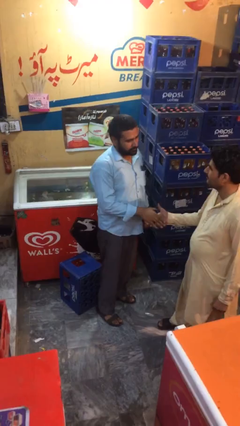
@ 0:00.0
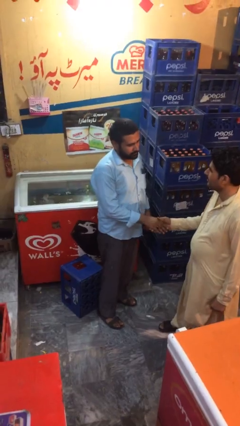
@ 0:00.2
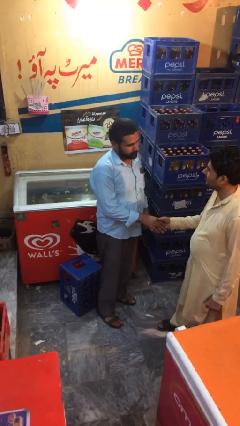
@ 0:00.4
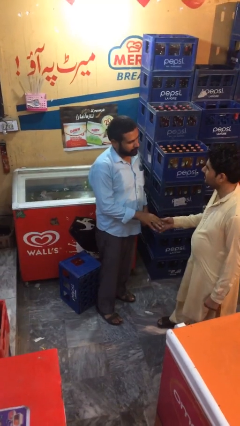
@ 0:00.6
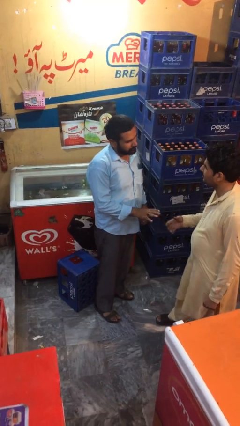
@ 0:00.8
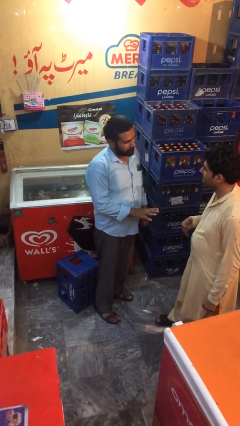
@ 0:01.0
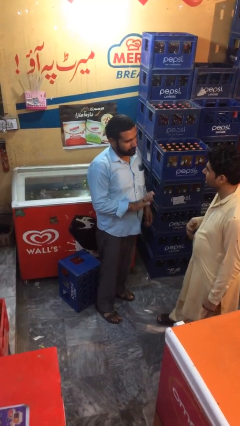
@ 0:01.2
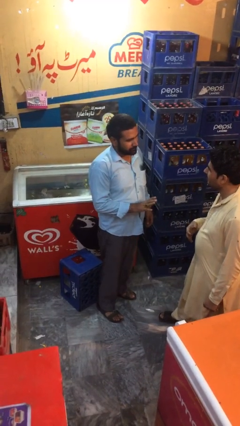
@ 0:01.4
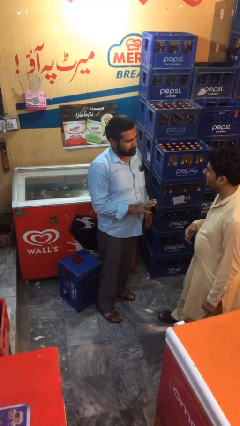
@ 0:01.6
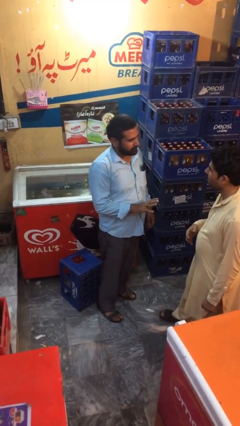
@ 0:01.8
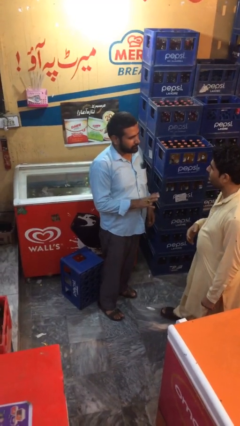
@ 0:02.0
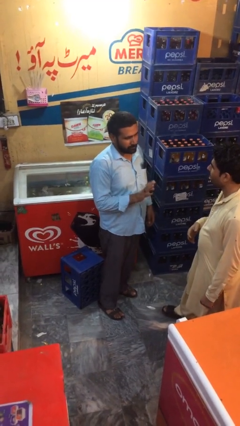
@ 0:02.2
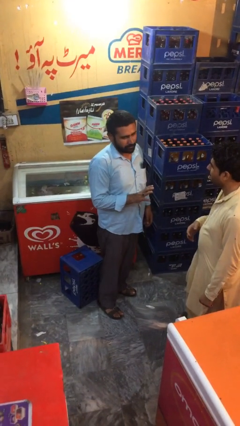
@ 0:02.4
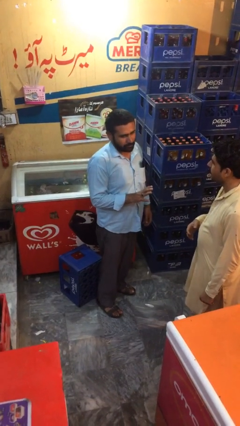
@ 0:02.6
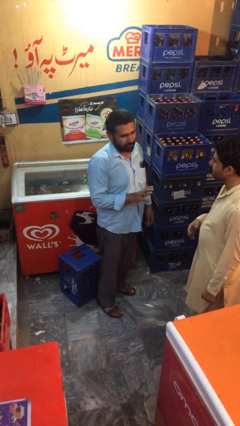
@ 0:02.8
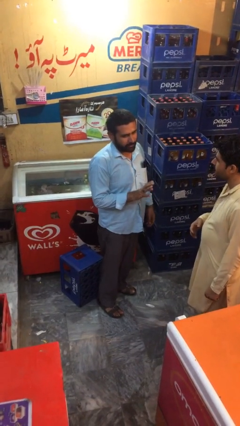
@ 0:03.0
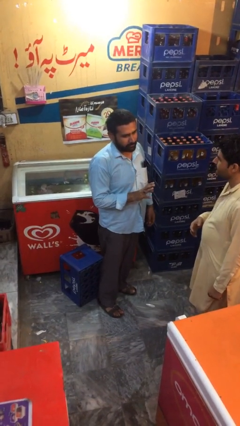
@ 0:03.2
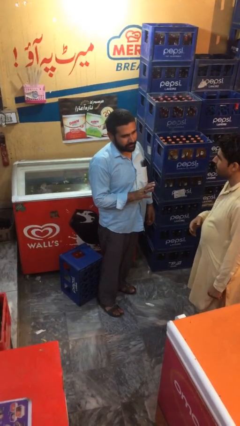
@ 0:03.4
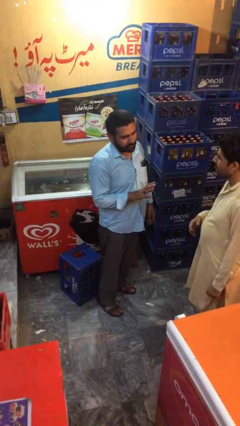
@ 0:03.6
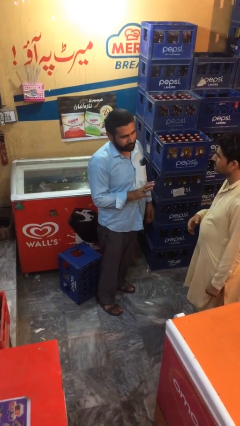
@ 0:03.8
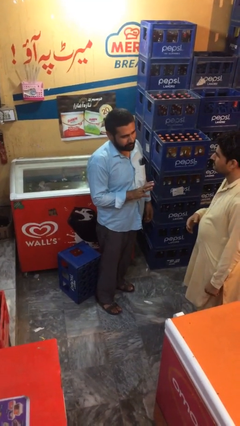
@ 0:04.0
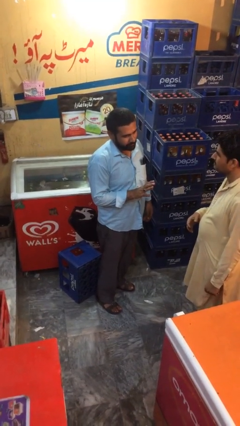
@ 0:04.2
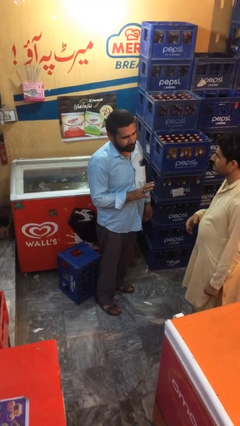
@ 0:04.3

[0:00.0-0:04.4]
person talks to person

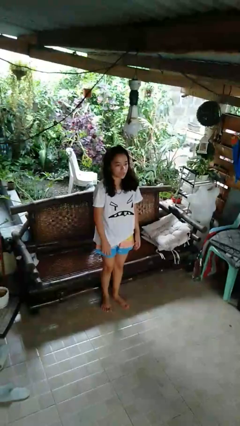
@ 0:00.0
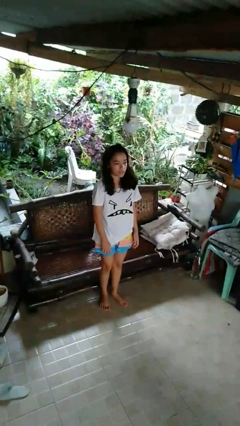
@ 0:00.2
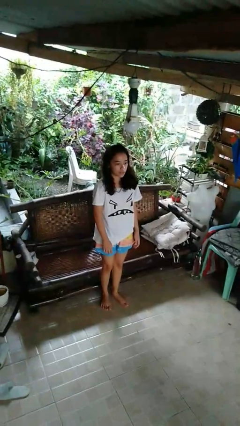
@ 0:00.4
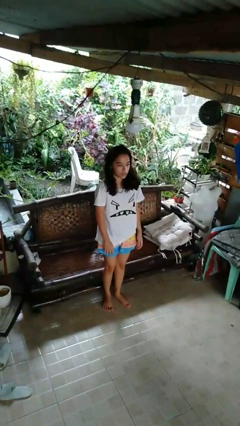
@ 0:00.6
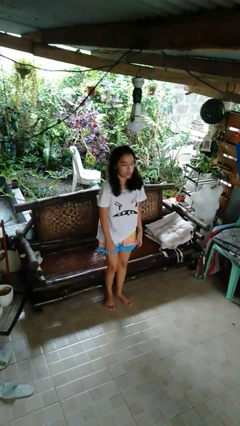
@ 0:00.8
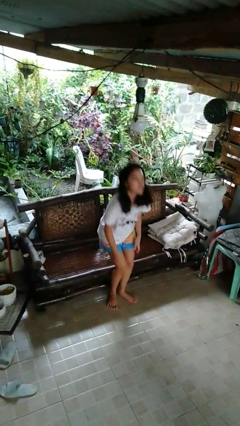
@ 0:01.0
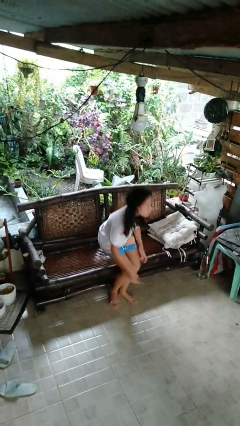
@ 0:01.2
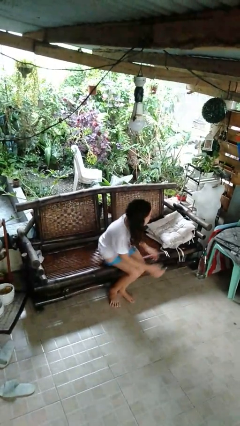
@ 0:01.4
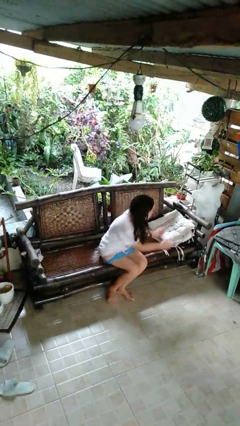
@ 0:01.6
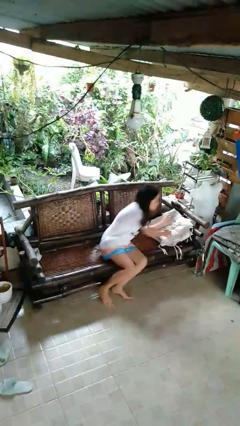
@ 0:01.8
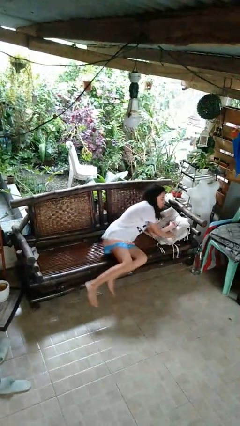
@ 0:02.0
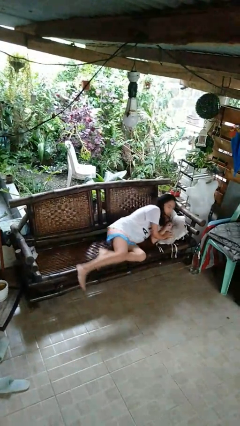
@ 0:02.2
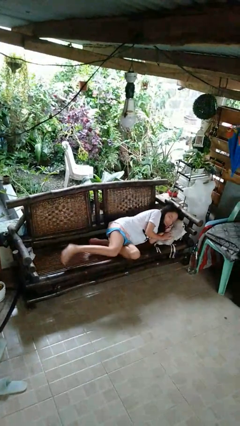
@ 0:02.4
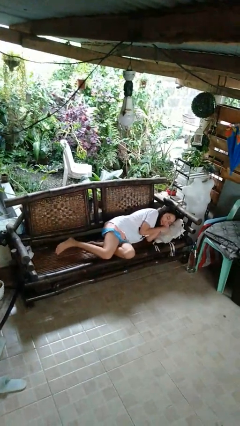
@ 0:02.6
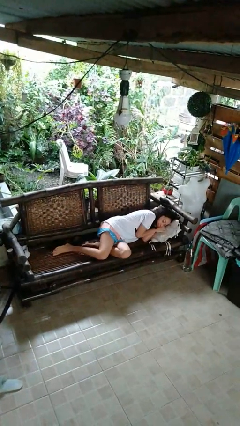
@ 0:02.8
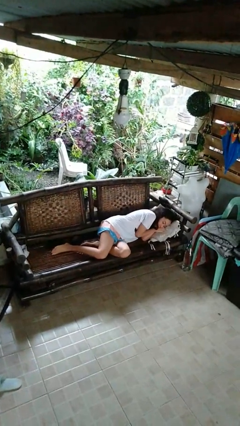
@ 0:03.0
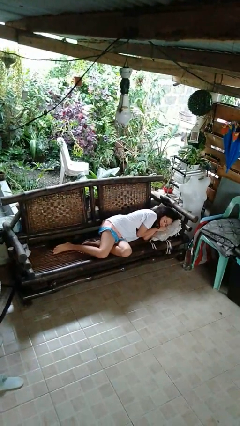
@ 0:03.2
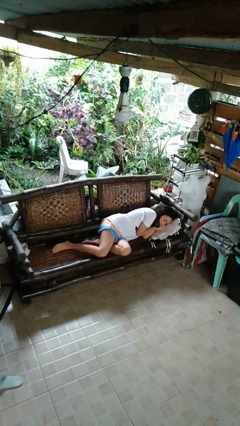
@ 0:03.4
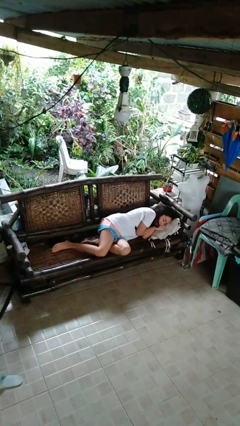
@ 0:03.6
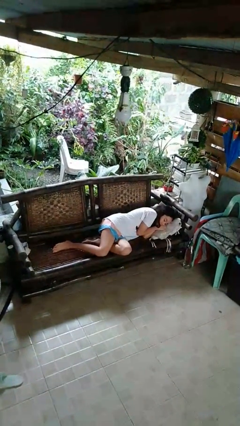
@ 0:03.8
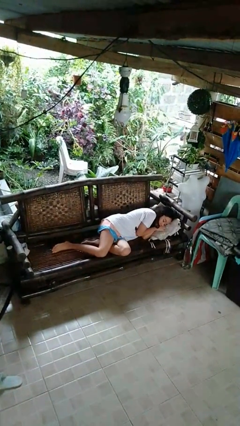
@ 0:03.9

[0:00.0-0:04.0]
person lies down on couch

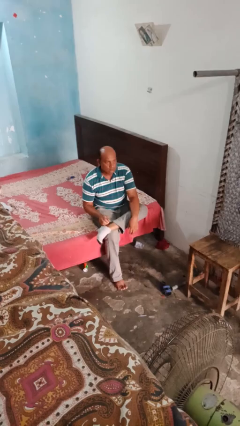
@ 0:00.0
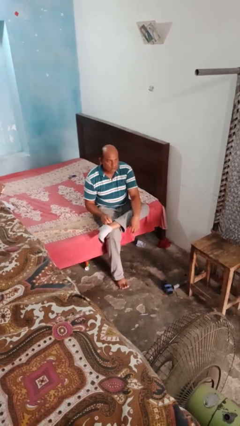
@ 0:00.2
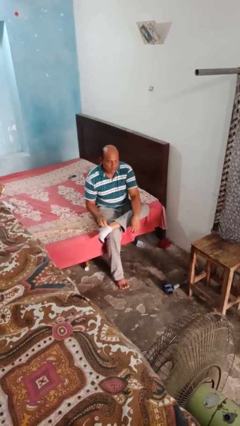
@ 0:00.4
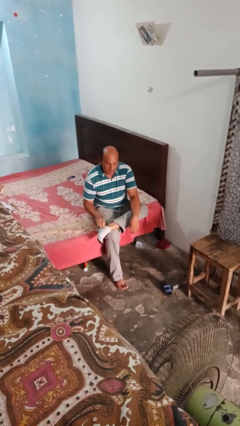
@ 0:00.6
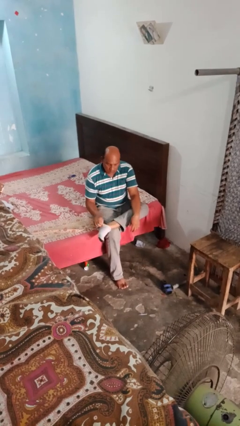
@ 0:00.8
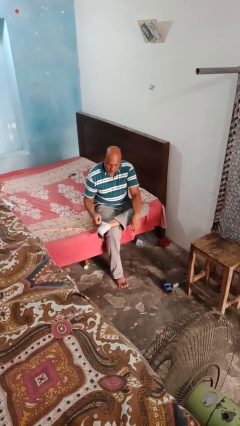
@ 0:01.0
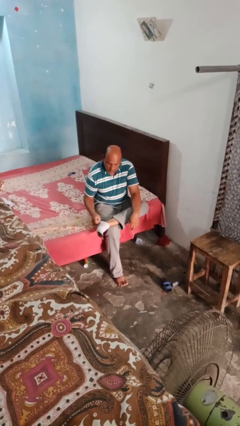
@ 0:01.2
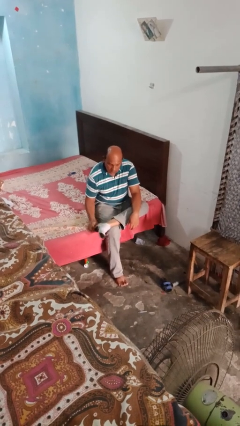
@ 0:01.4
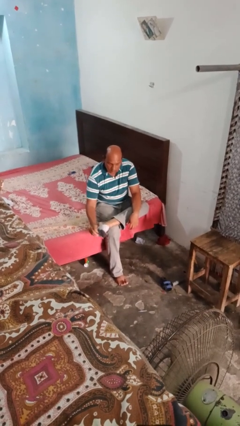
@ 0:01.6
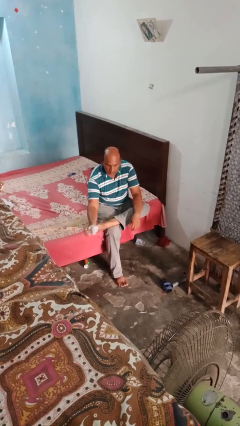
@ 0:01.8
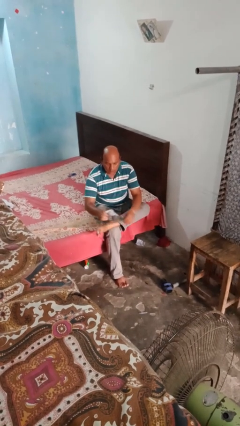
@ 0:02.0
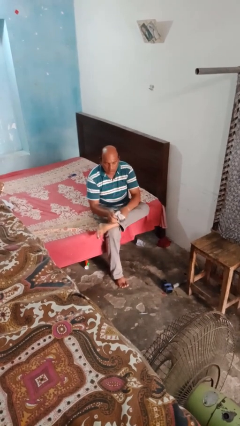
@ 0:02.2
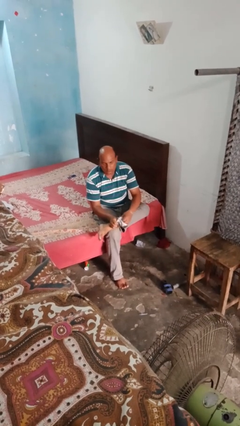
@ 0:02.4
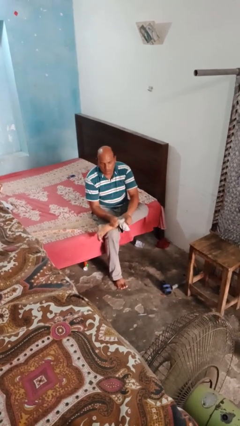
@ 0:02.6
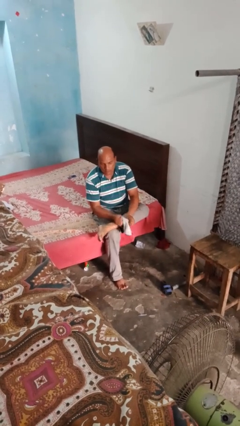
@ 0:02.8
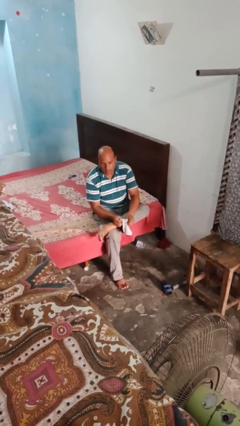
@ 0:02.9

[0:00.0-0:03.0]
person takes off socks

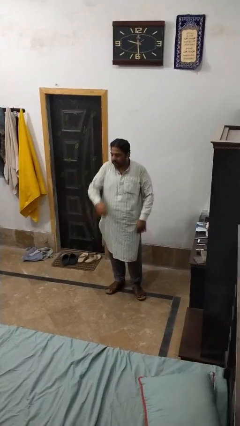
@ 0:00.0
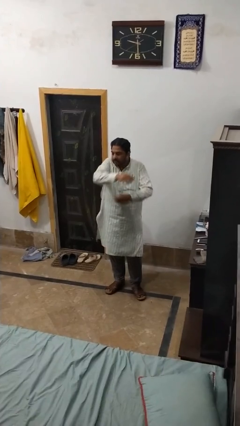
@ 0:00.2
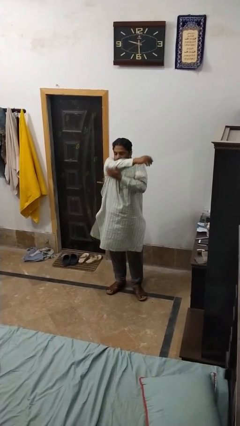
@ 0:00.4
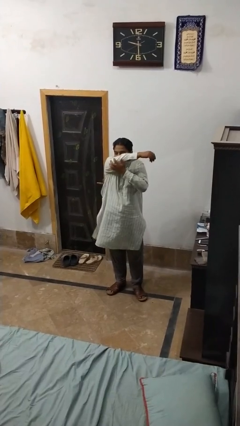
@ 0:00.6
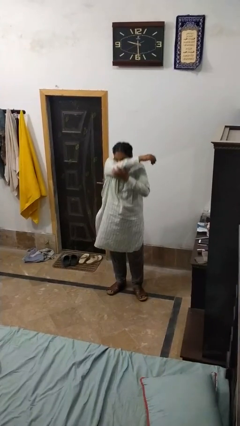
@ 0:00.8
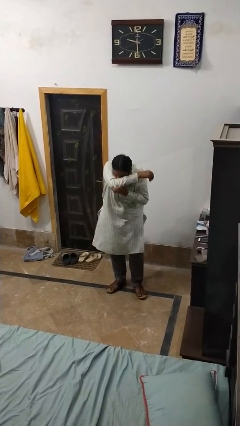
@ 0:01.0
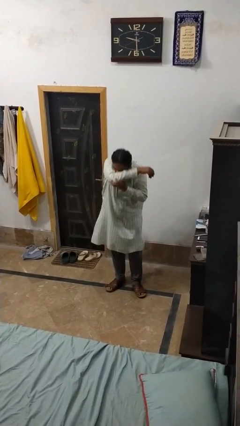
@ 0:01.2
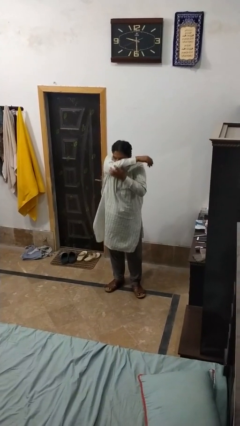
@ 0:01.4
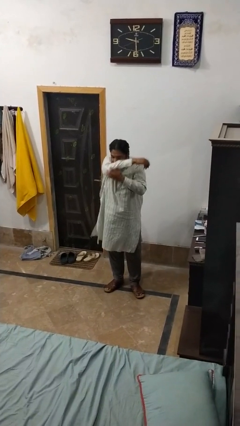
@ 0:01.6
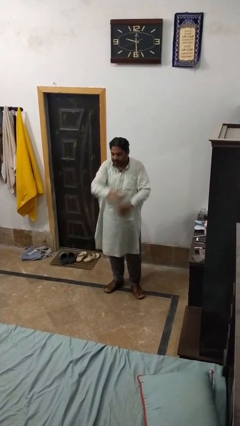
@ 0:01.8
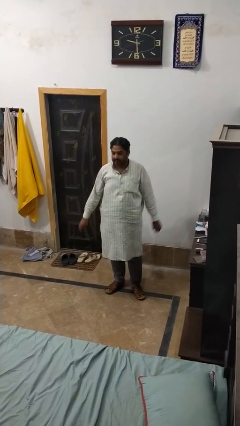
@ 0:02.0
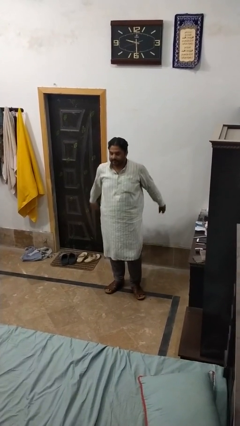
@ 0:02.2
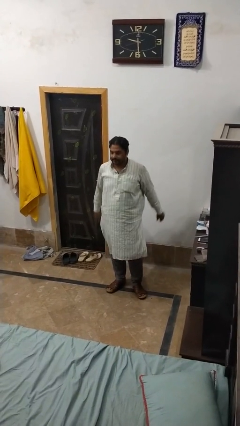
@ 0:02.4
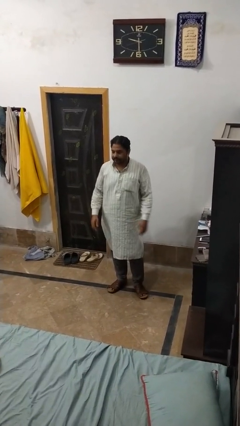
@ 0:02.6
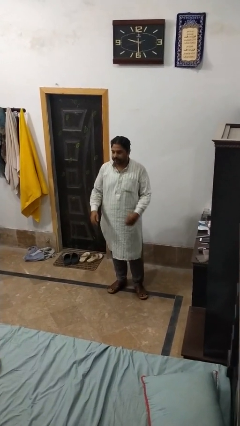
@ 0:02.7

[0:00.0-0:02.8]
person sneezes into arm

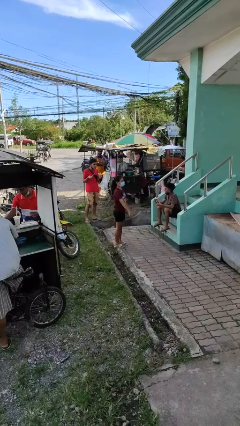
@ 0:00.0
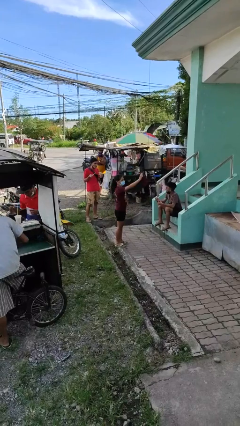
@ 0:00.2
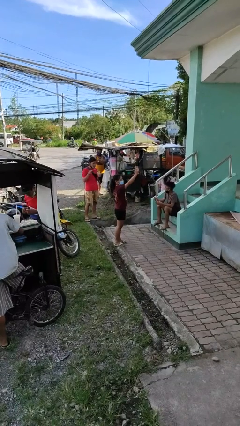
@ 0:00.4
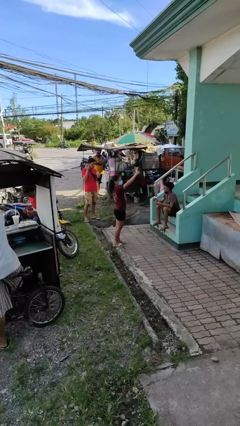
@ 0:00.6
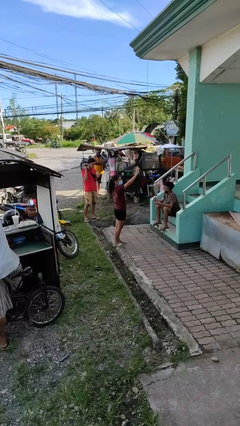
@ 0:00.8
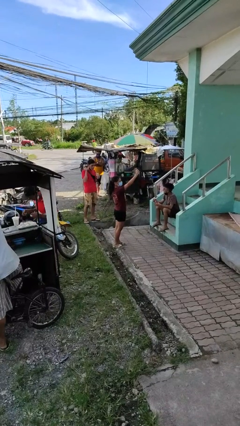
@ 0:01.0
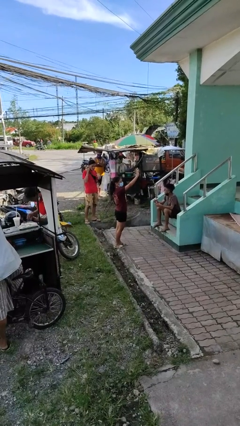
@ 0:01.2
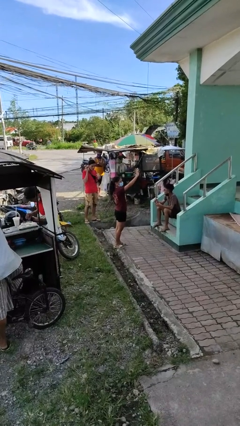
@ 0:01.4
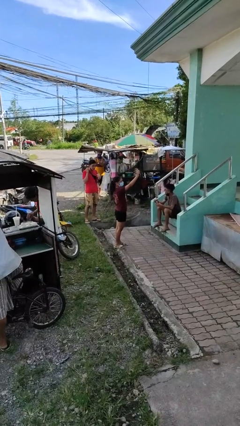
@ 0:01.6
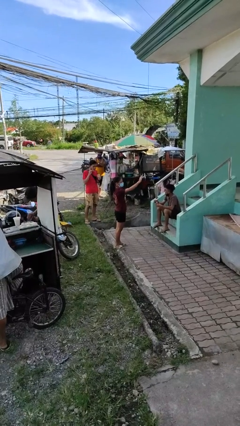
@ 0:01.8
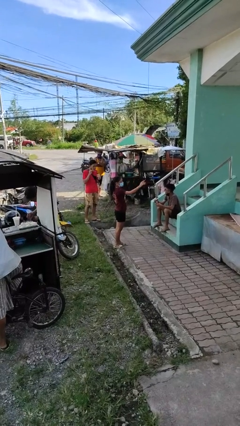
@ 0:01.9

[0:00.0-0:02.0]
person waves at person

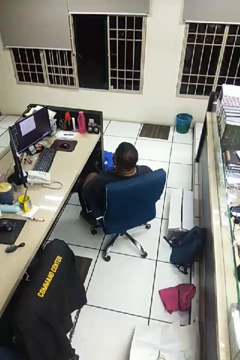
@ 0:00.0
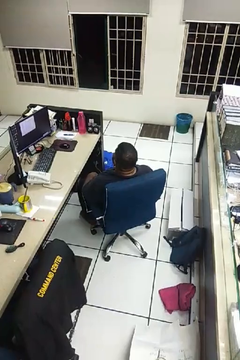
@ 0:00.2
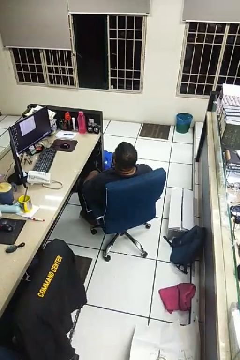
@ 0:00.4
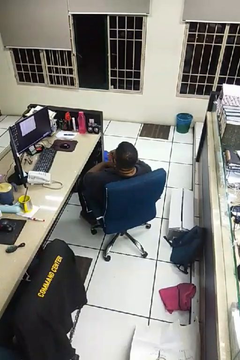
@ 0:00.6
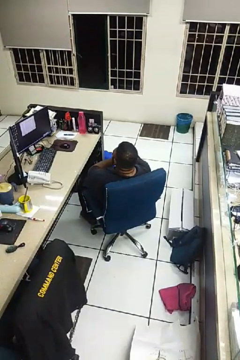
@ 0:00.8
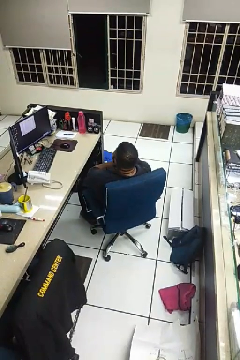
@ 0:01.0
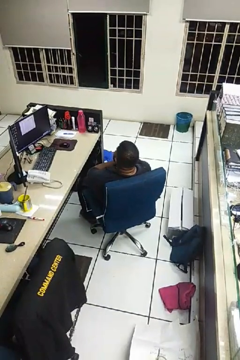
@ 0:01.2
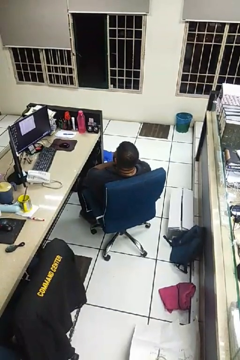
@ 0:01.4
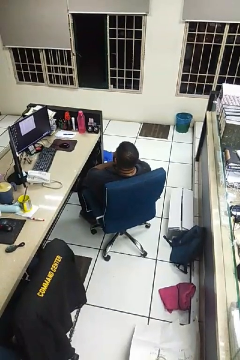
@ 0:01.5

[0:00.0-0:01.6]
person strokes chin
